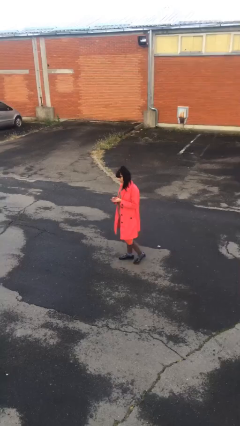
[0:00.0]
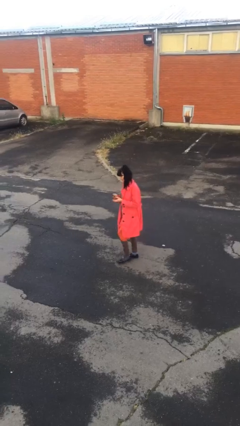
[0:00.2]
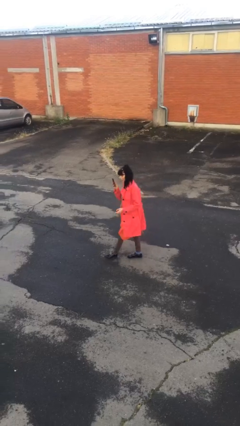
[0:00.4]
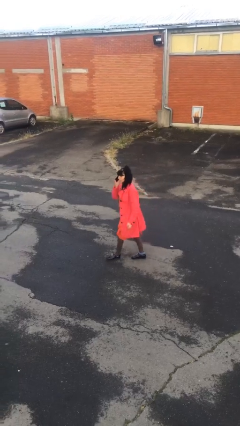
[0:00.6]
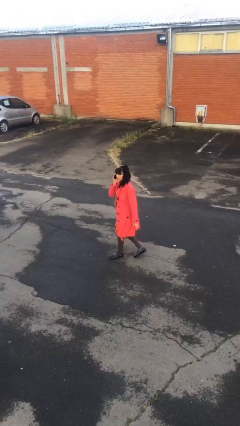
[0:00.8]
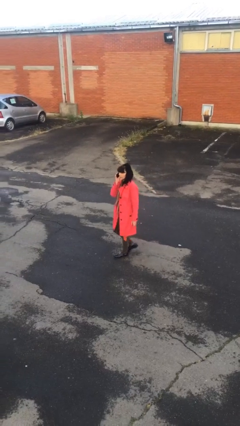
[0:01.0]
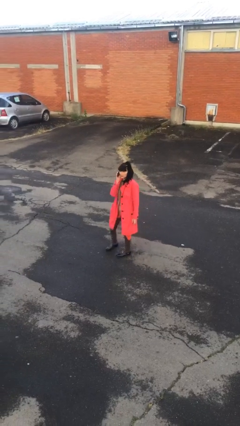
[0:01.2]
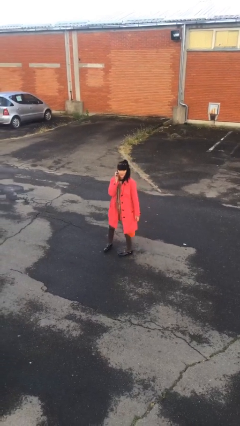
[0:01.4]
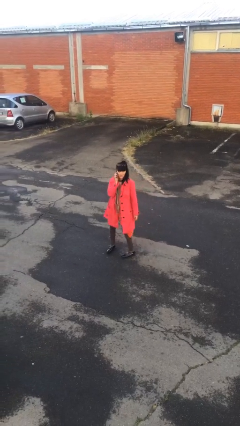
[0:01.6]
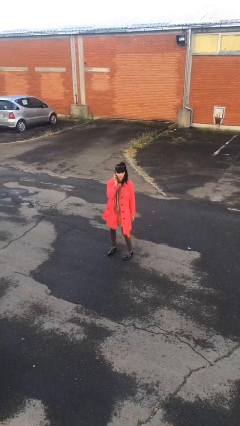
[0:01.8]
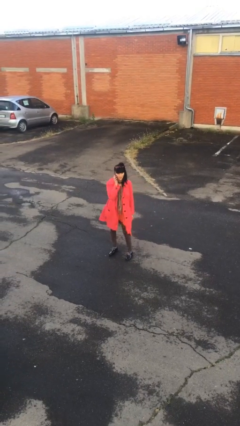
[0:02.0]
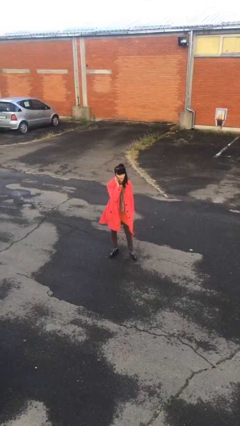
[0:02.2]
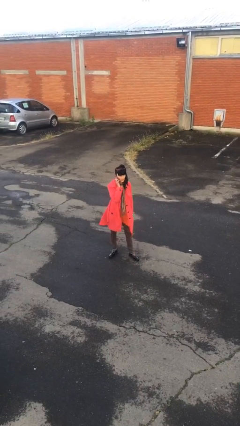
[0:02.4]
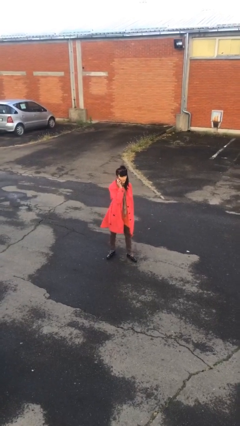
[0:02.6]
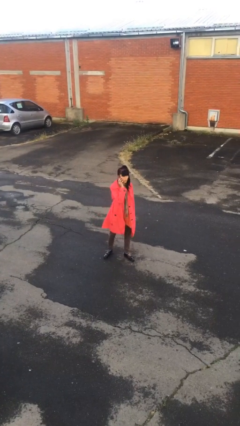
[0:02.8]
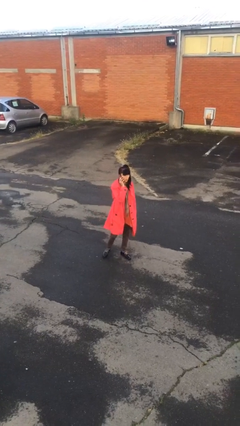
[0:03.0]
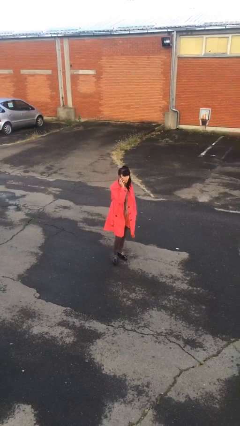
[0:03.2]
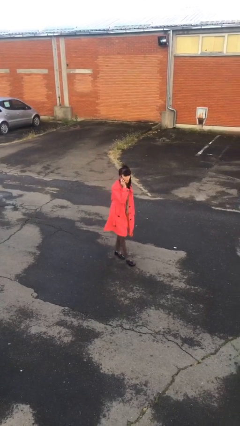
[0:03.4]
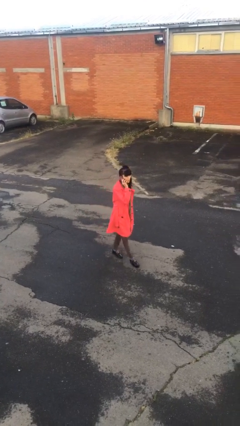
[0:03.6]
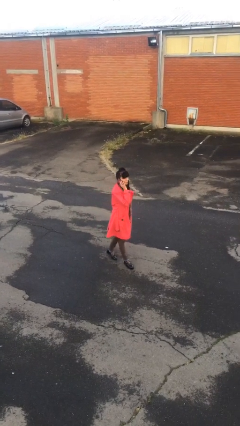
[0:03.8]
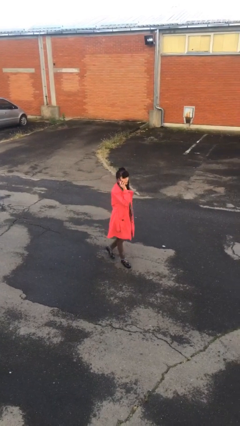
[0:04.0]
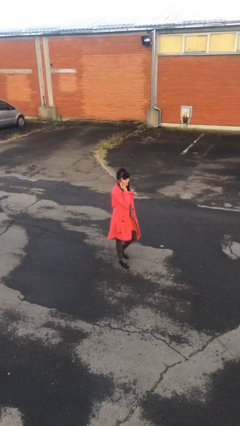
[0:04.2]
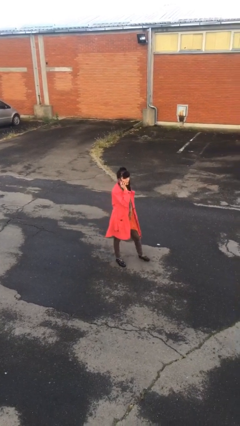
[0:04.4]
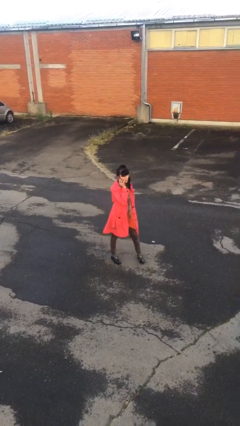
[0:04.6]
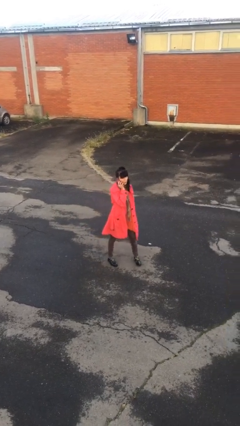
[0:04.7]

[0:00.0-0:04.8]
person talks on phone

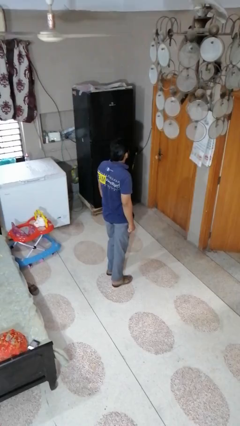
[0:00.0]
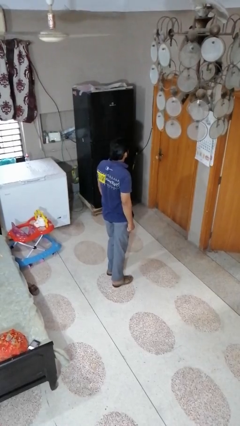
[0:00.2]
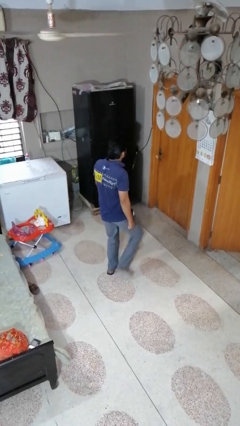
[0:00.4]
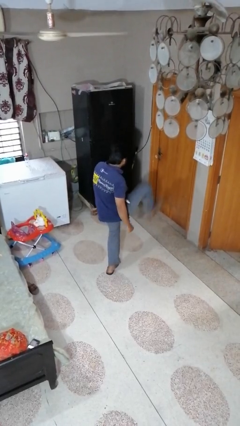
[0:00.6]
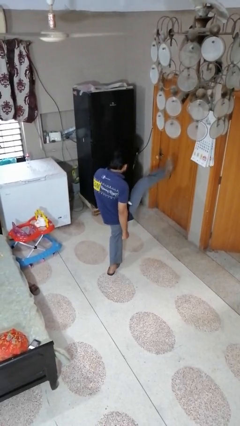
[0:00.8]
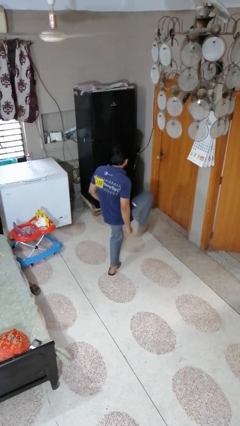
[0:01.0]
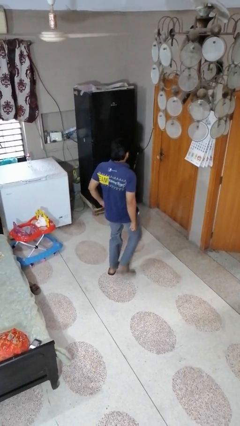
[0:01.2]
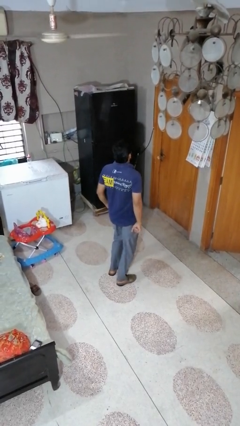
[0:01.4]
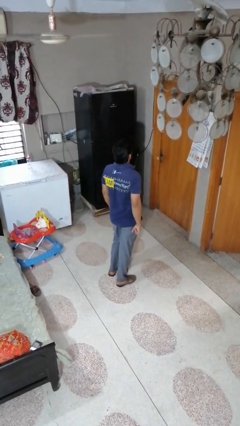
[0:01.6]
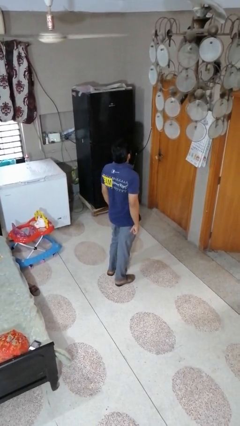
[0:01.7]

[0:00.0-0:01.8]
person karate kicks

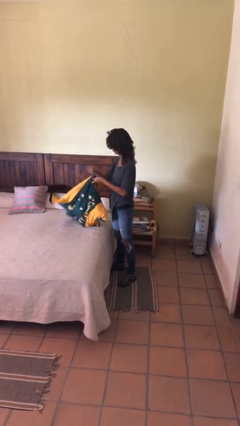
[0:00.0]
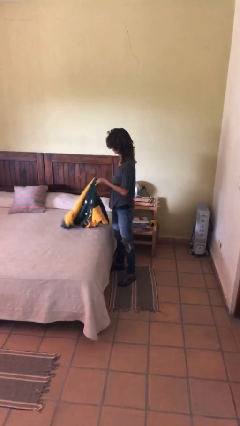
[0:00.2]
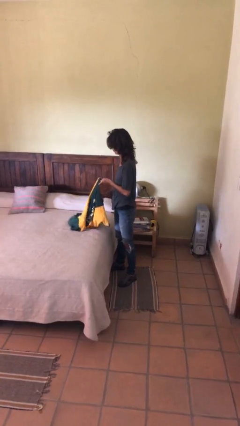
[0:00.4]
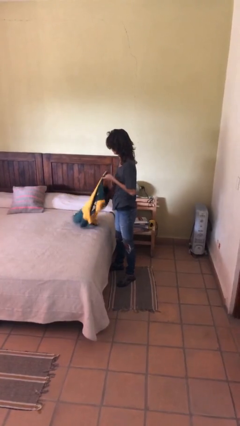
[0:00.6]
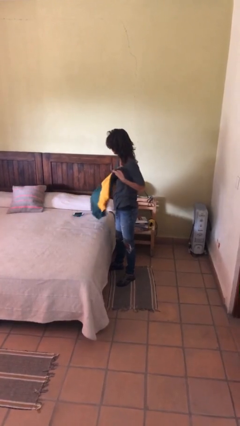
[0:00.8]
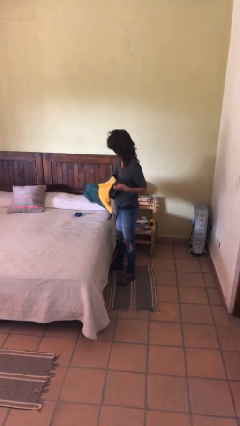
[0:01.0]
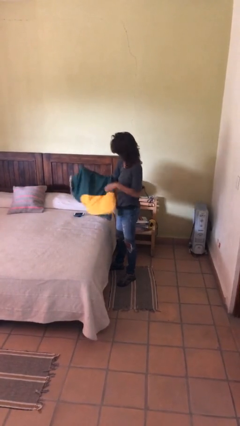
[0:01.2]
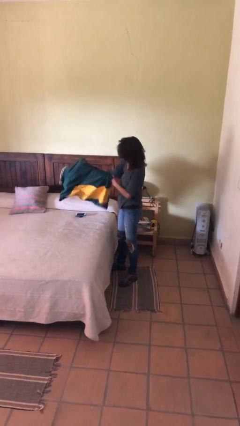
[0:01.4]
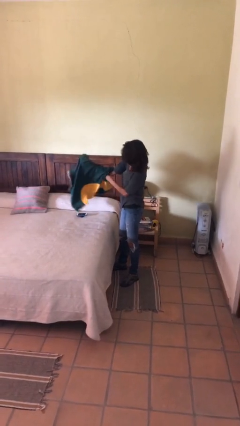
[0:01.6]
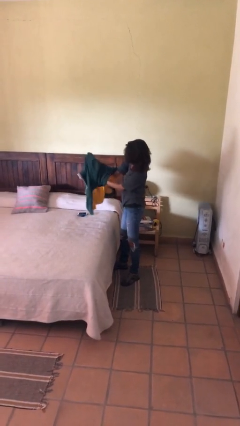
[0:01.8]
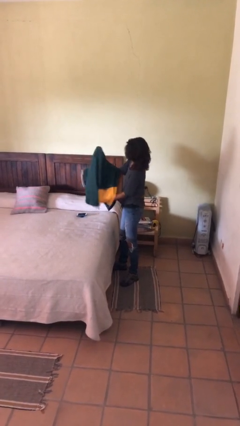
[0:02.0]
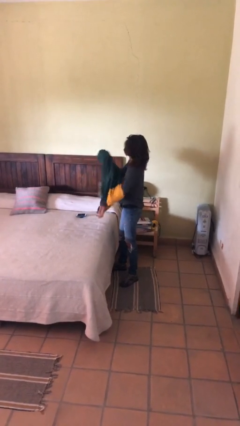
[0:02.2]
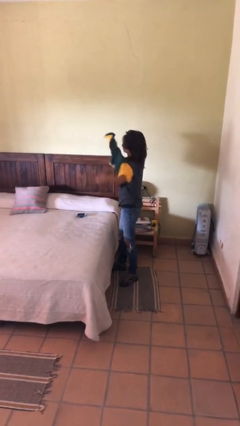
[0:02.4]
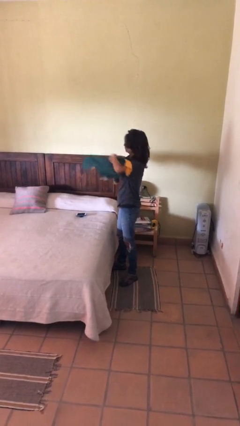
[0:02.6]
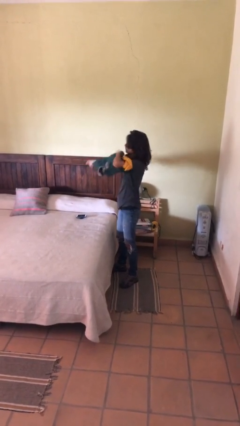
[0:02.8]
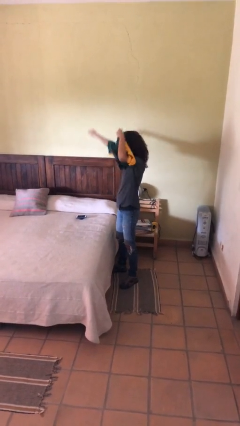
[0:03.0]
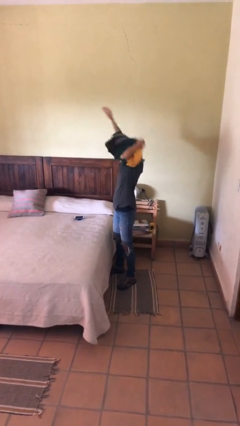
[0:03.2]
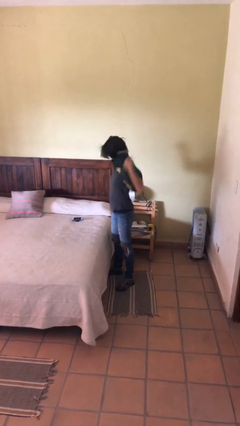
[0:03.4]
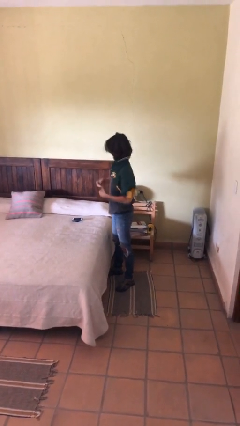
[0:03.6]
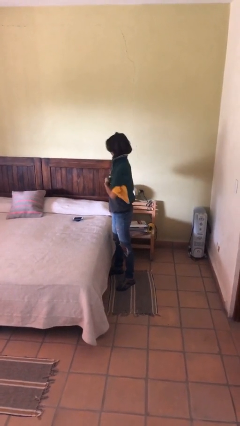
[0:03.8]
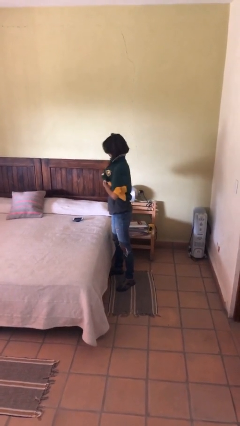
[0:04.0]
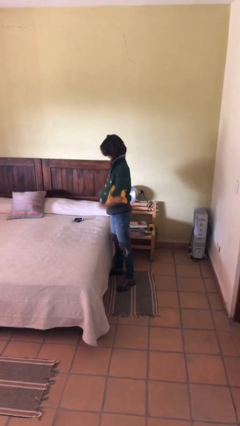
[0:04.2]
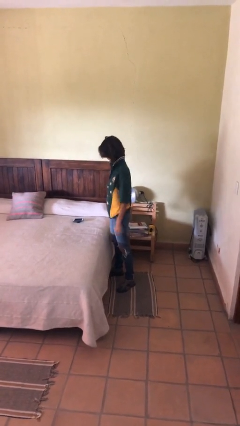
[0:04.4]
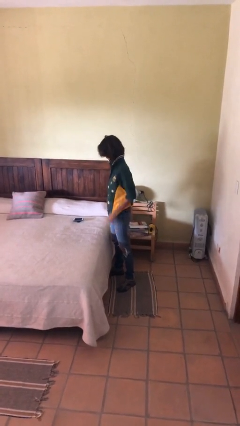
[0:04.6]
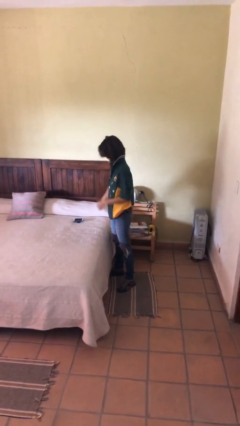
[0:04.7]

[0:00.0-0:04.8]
person puts on shirt

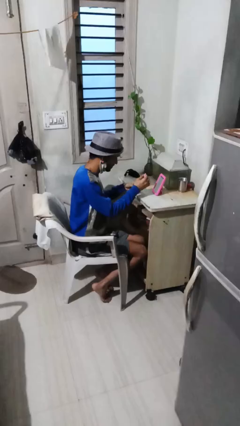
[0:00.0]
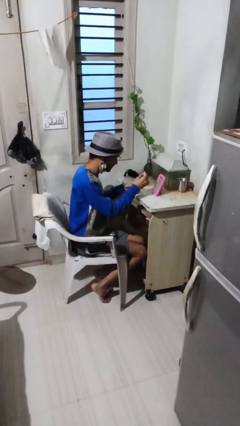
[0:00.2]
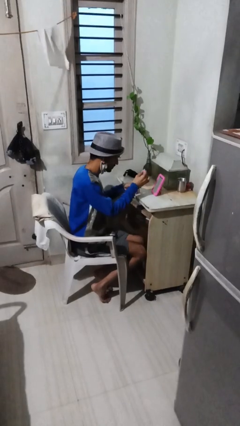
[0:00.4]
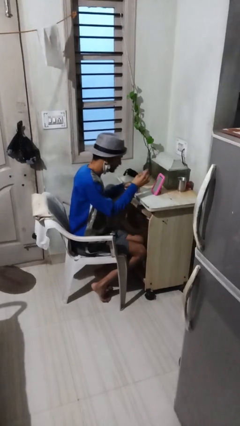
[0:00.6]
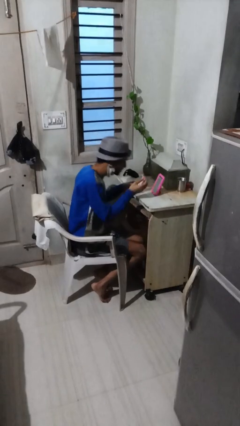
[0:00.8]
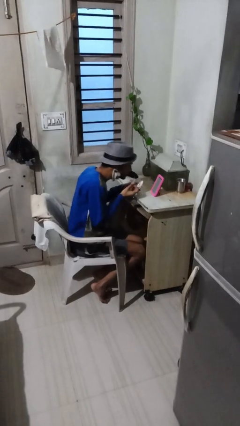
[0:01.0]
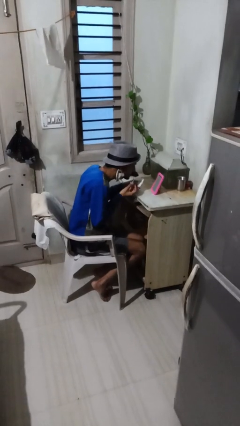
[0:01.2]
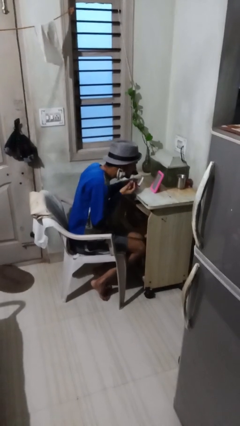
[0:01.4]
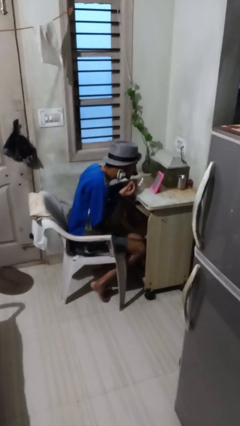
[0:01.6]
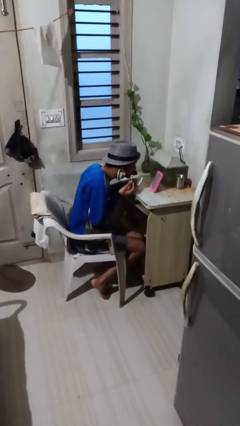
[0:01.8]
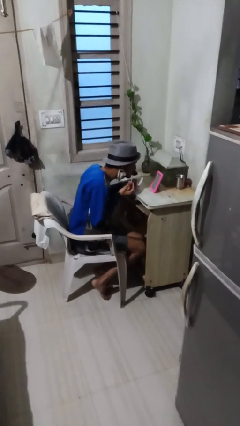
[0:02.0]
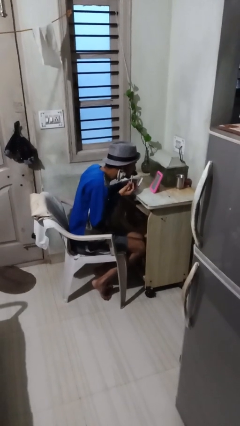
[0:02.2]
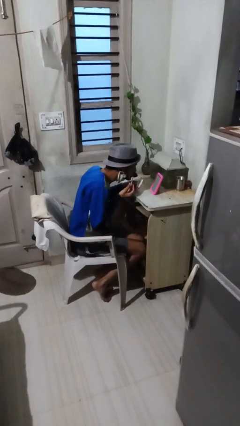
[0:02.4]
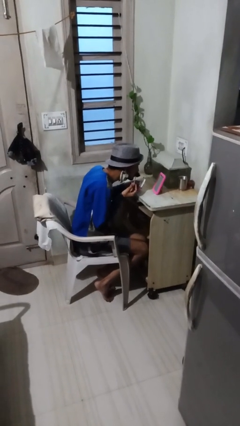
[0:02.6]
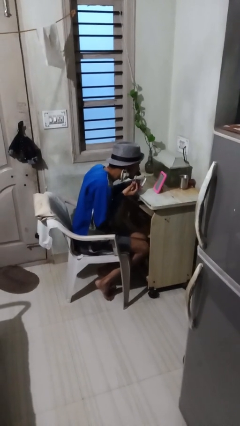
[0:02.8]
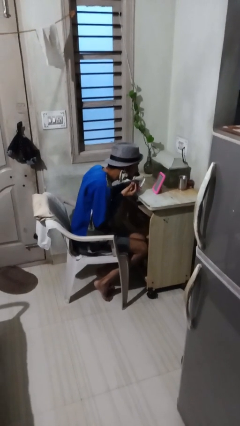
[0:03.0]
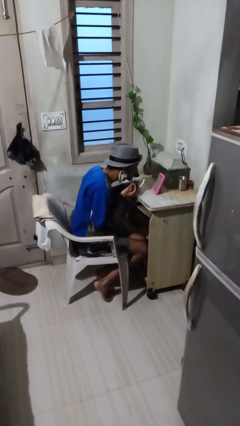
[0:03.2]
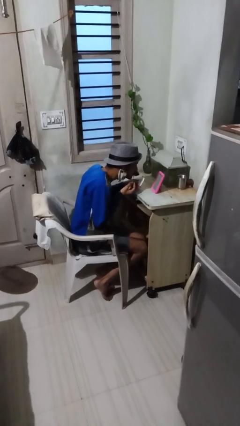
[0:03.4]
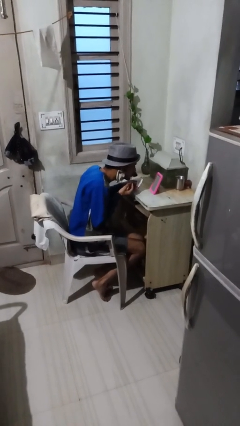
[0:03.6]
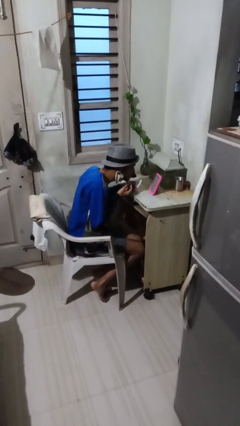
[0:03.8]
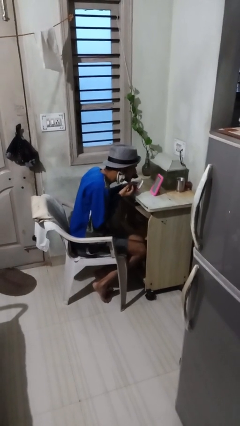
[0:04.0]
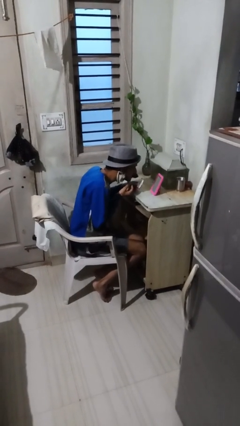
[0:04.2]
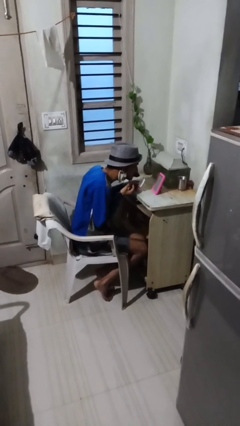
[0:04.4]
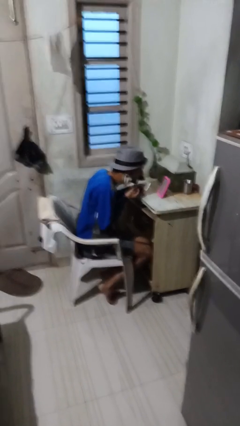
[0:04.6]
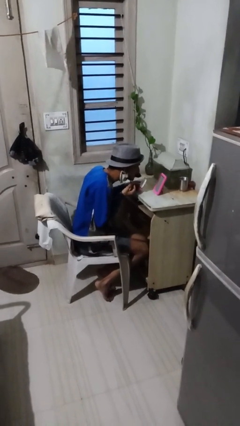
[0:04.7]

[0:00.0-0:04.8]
person applies lip makeup

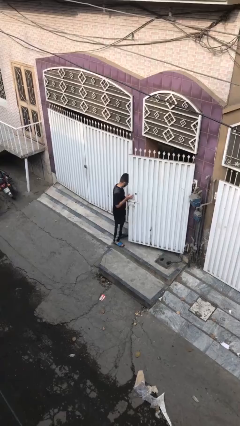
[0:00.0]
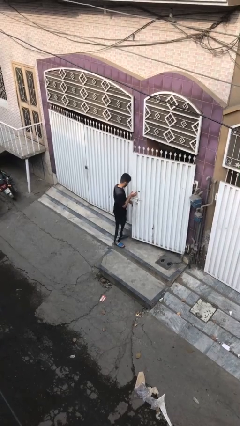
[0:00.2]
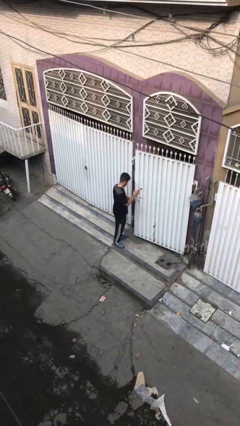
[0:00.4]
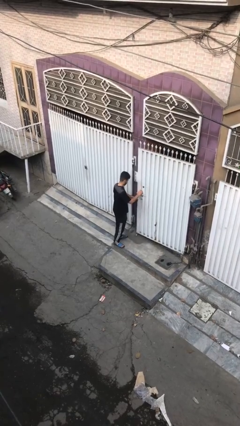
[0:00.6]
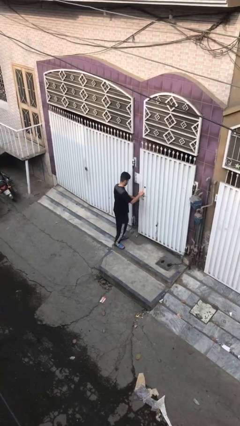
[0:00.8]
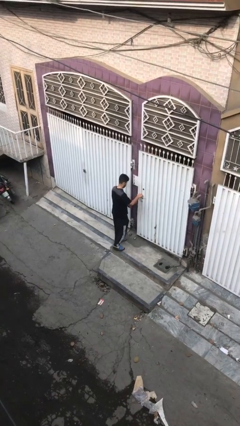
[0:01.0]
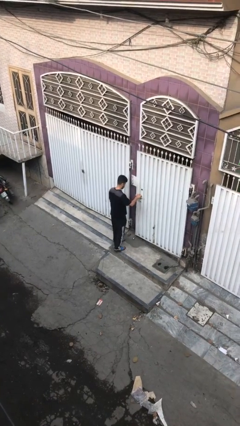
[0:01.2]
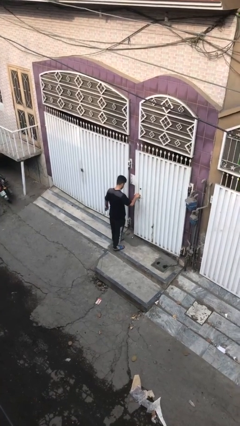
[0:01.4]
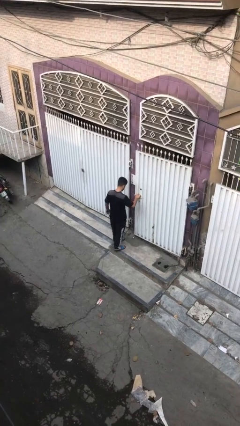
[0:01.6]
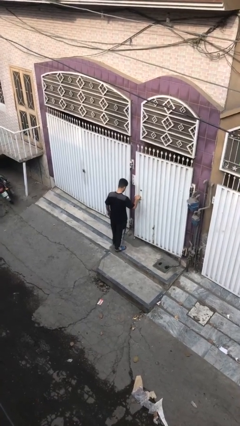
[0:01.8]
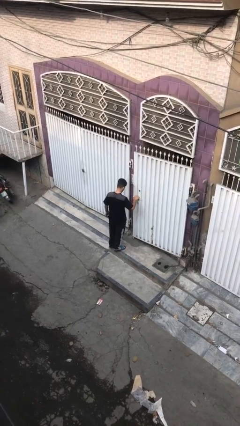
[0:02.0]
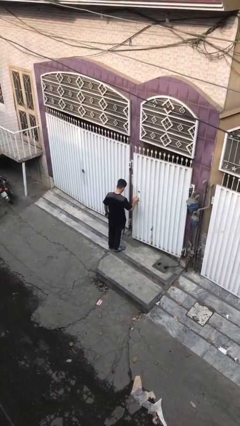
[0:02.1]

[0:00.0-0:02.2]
person closes facility door
